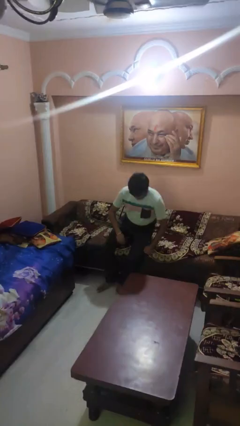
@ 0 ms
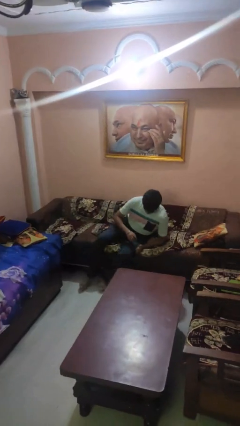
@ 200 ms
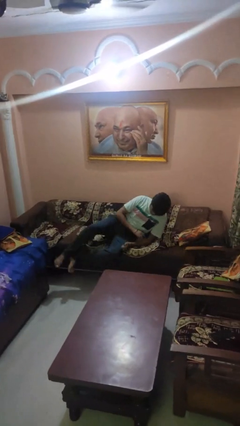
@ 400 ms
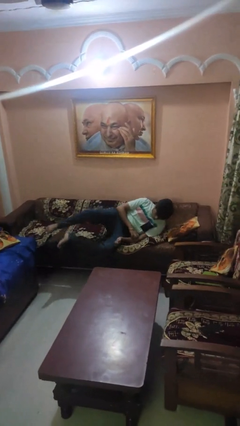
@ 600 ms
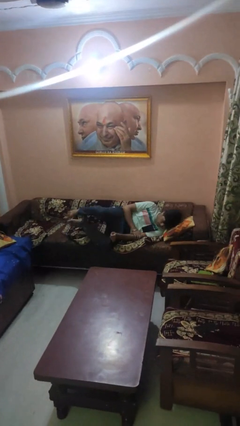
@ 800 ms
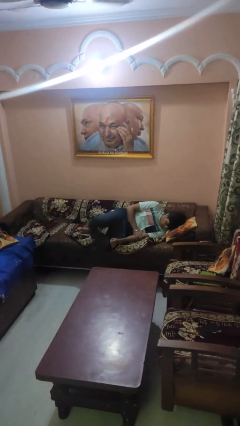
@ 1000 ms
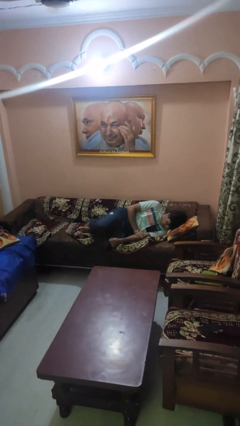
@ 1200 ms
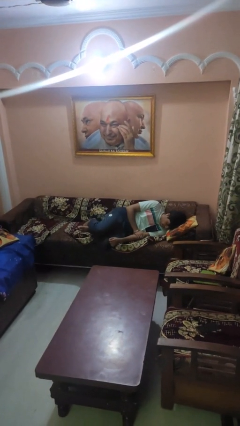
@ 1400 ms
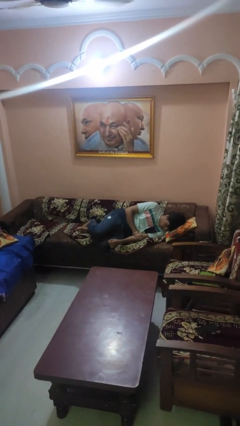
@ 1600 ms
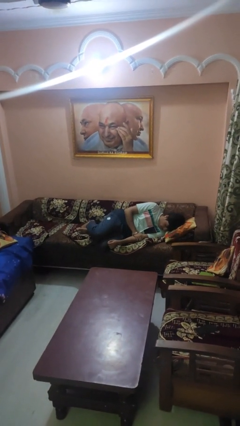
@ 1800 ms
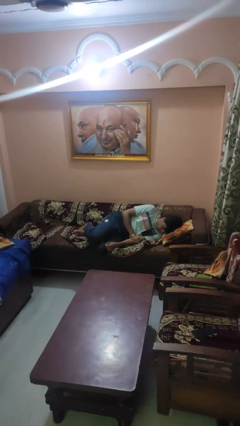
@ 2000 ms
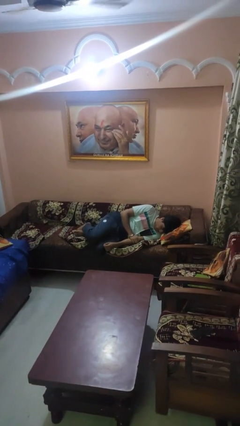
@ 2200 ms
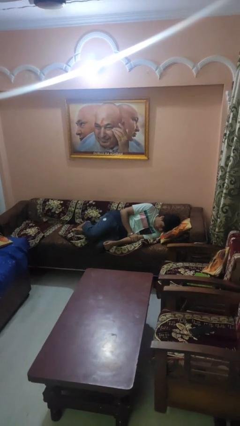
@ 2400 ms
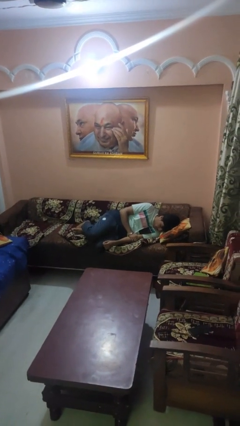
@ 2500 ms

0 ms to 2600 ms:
person lies down on couch

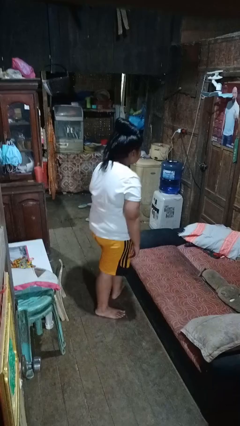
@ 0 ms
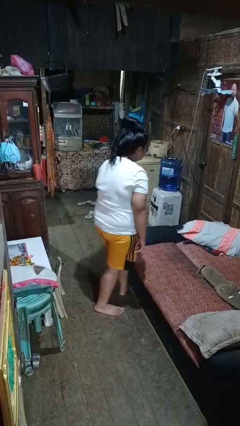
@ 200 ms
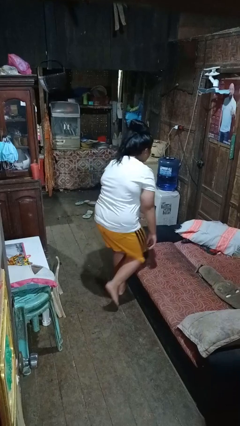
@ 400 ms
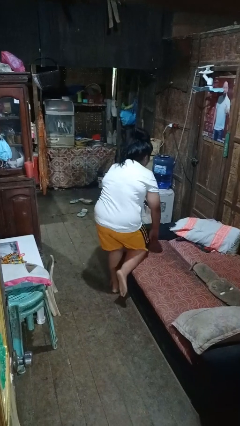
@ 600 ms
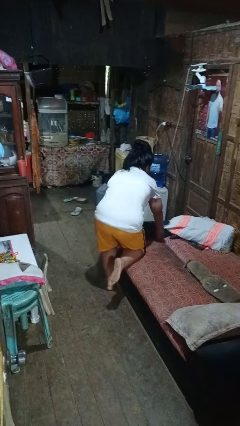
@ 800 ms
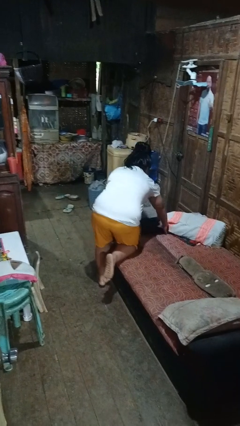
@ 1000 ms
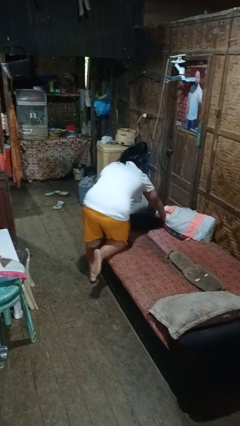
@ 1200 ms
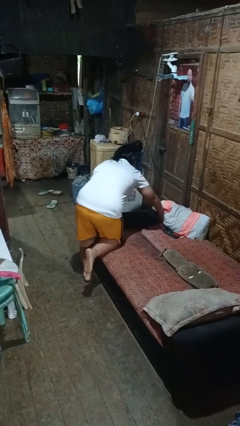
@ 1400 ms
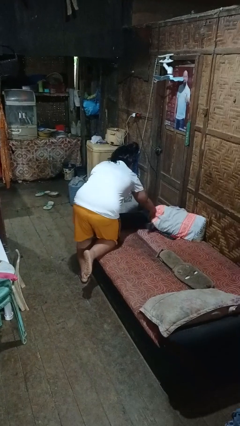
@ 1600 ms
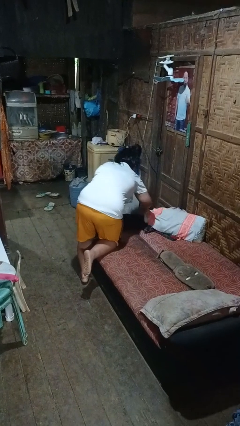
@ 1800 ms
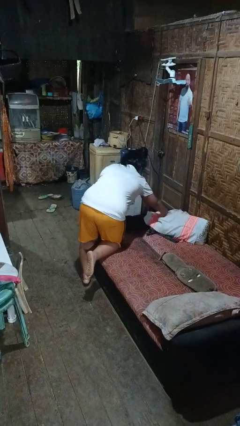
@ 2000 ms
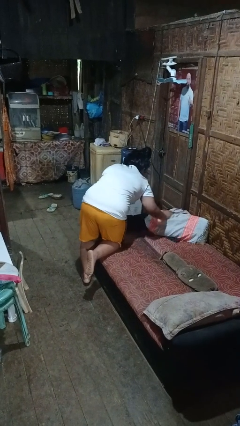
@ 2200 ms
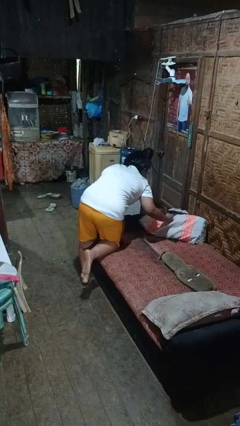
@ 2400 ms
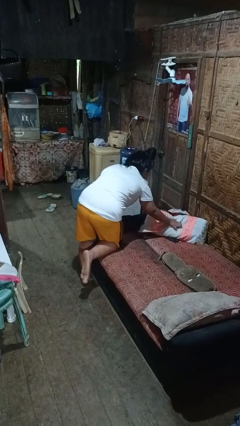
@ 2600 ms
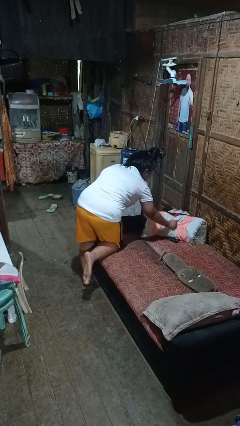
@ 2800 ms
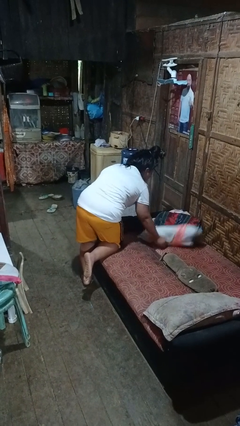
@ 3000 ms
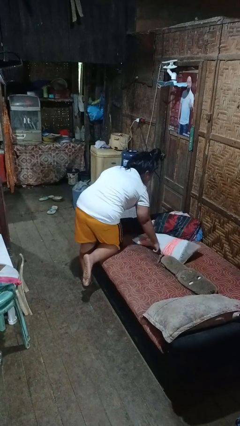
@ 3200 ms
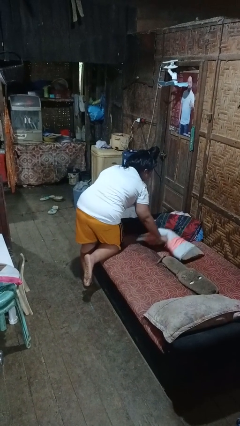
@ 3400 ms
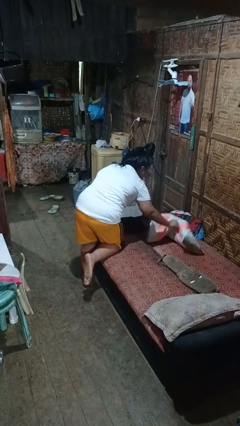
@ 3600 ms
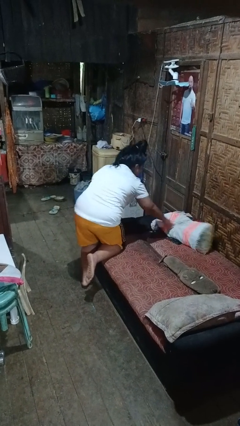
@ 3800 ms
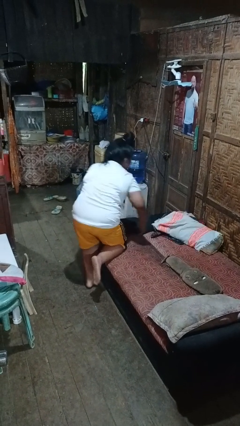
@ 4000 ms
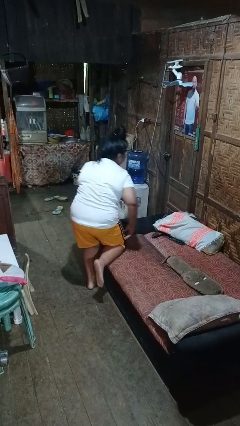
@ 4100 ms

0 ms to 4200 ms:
person searches in couch

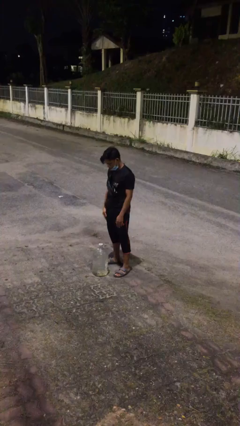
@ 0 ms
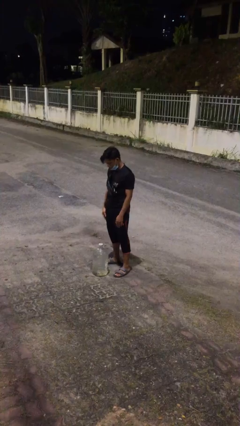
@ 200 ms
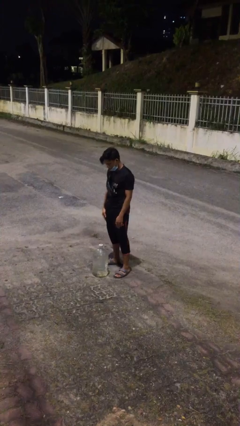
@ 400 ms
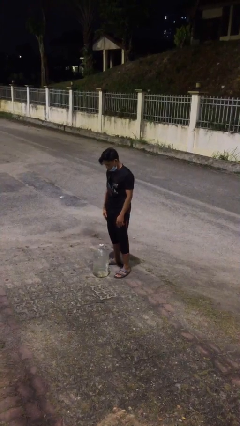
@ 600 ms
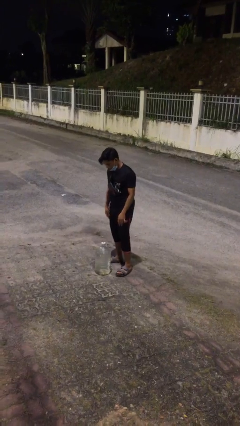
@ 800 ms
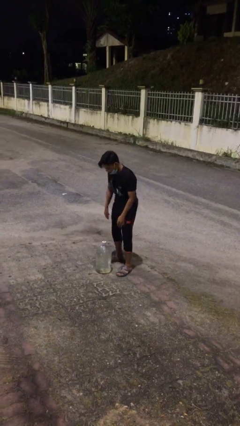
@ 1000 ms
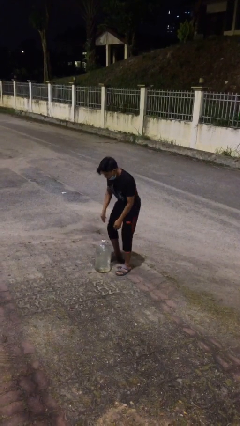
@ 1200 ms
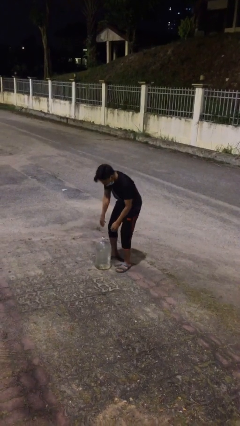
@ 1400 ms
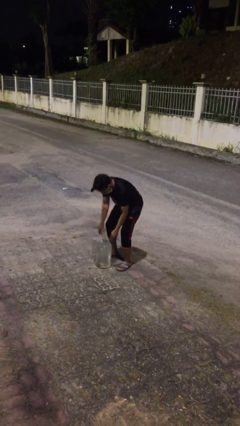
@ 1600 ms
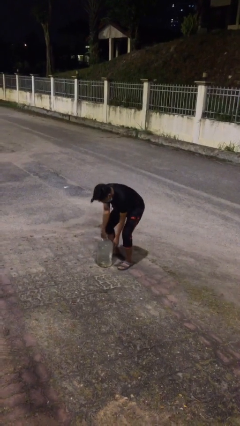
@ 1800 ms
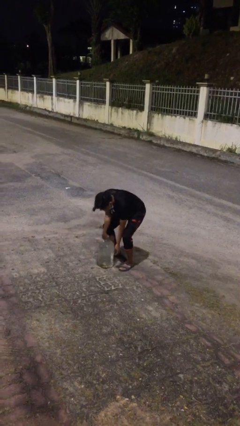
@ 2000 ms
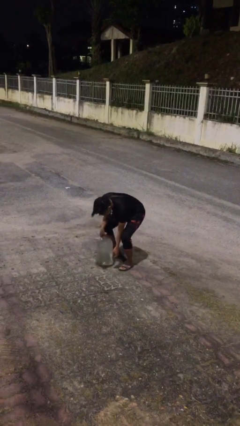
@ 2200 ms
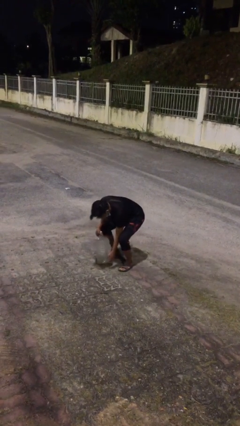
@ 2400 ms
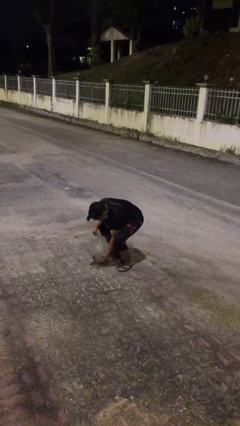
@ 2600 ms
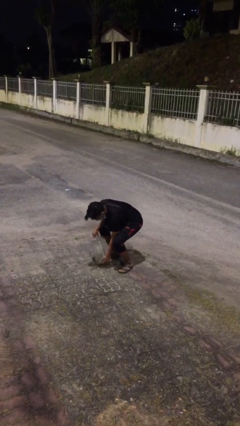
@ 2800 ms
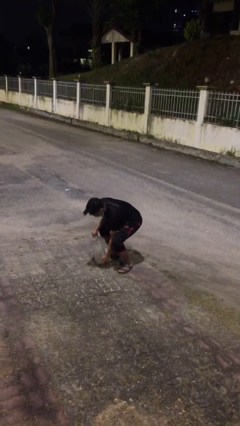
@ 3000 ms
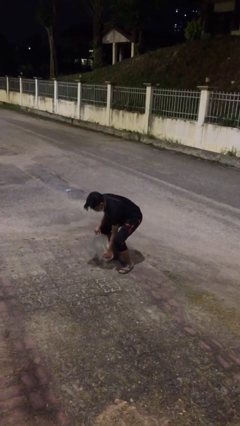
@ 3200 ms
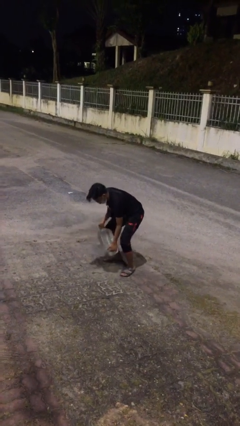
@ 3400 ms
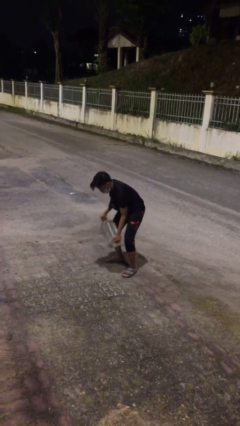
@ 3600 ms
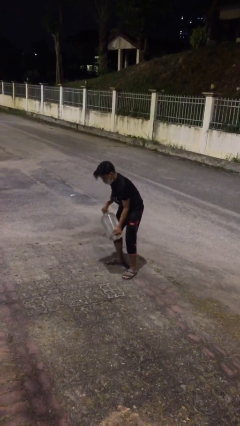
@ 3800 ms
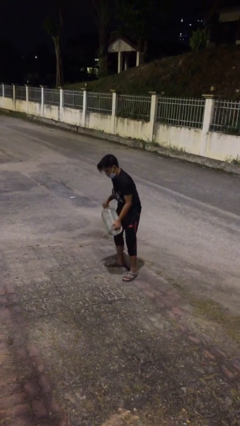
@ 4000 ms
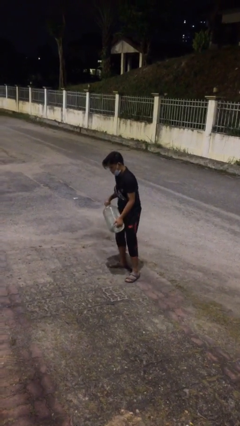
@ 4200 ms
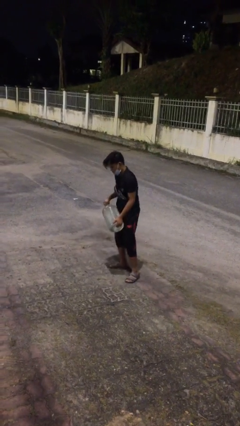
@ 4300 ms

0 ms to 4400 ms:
person picks up object from floor

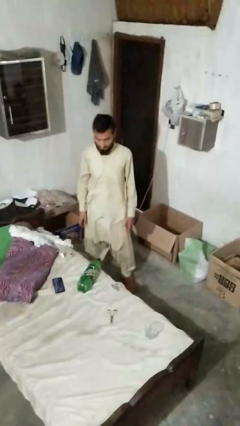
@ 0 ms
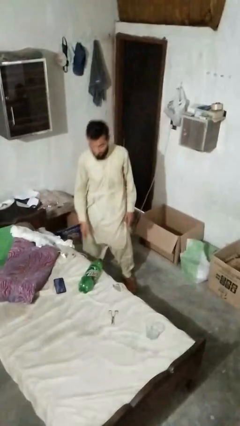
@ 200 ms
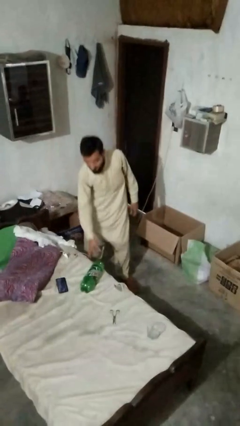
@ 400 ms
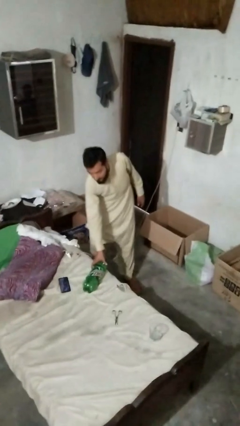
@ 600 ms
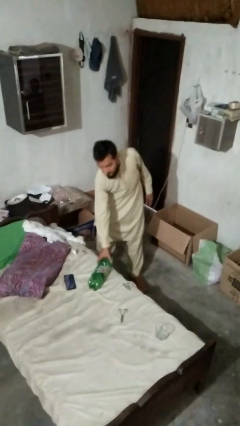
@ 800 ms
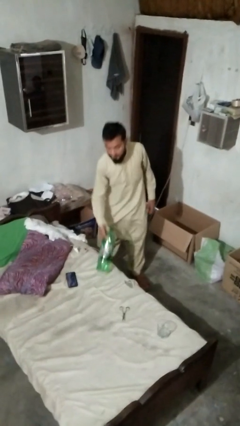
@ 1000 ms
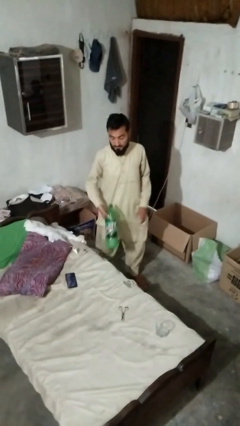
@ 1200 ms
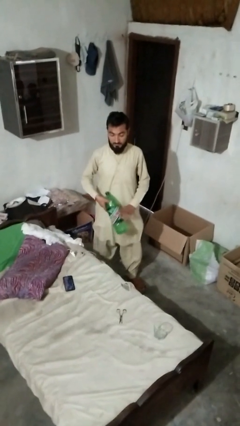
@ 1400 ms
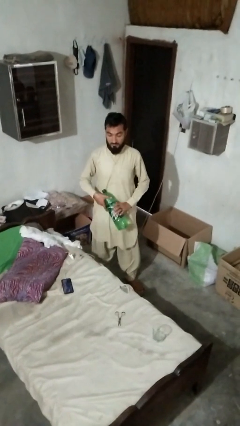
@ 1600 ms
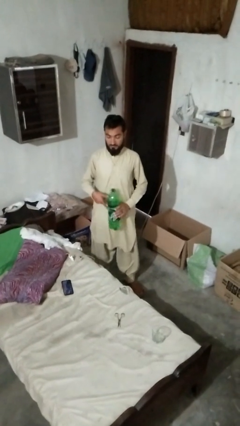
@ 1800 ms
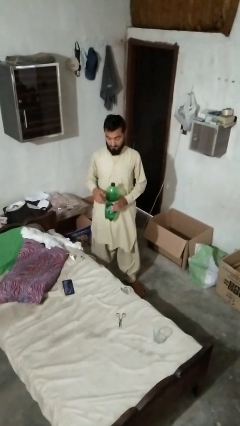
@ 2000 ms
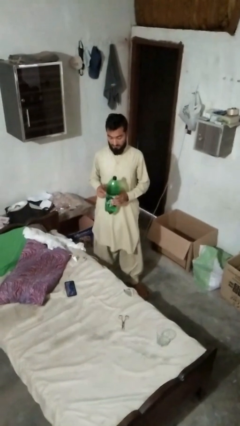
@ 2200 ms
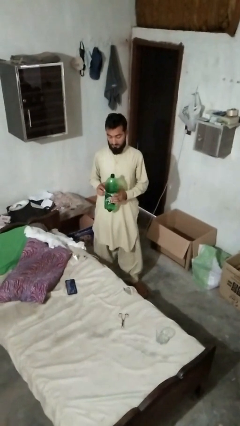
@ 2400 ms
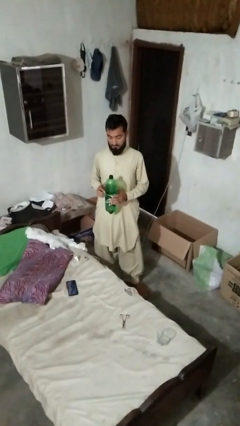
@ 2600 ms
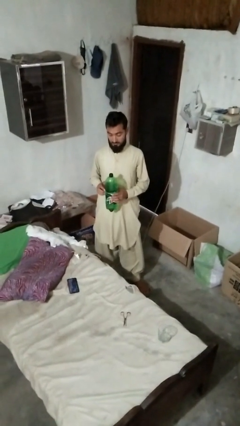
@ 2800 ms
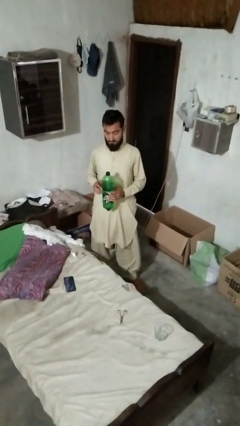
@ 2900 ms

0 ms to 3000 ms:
person picks up object from bed

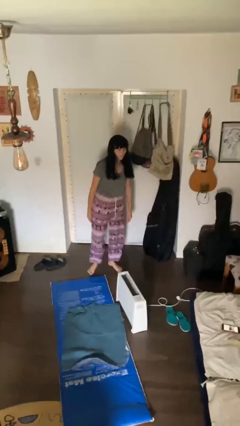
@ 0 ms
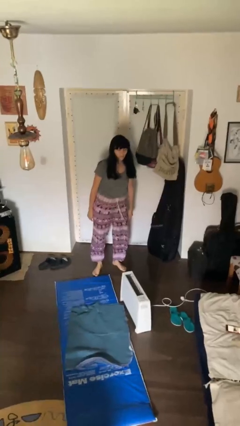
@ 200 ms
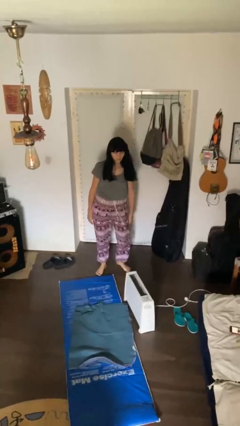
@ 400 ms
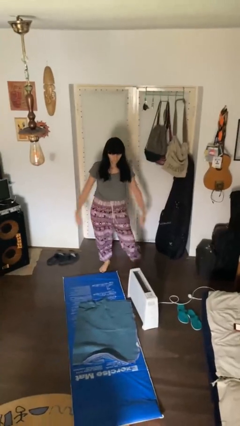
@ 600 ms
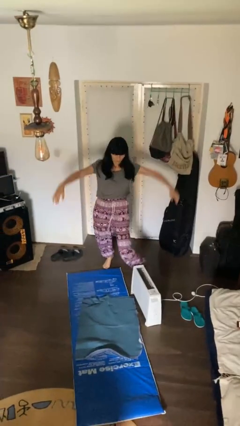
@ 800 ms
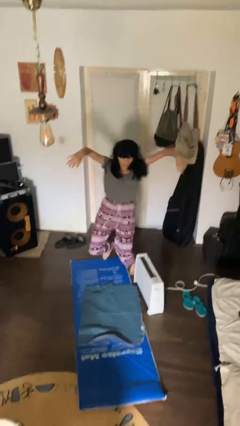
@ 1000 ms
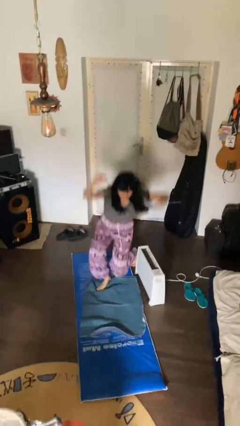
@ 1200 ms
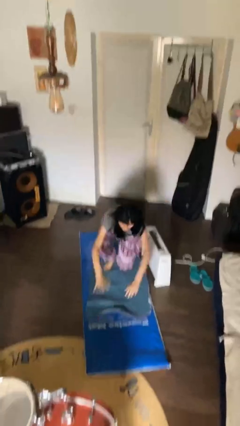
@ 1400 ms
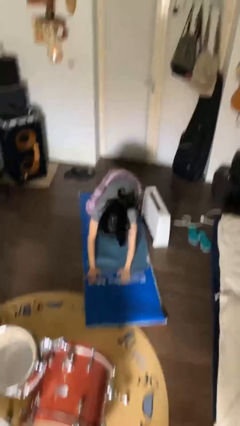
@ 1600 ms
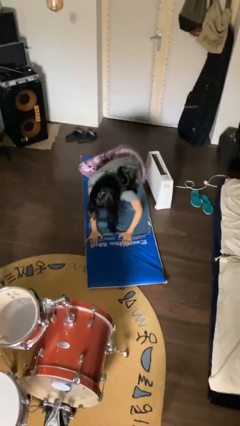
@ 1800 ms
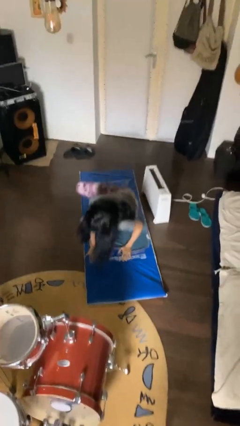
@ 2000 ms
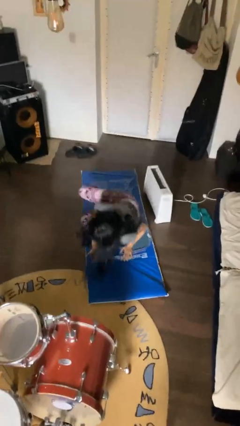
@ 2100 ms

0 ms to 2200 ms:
person trips on object on floor

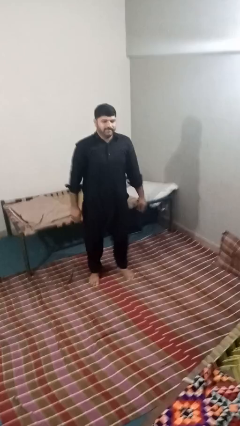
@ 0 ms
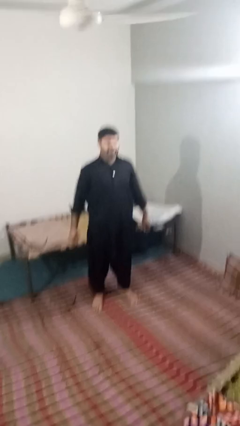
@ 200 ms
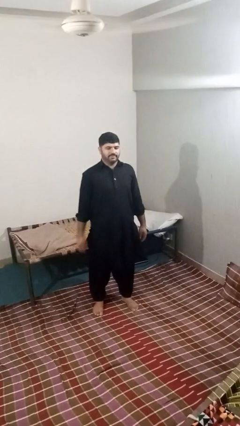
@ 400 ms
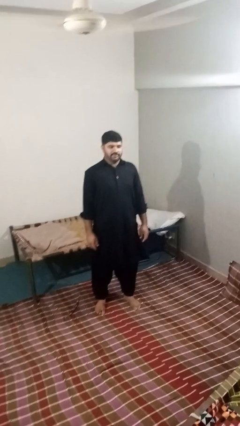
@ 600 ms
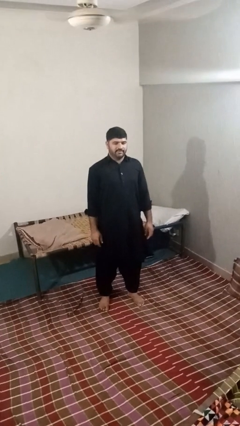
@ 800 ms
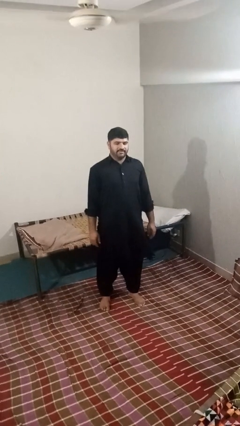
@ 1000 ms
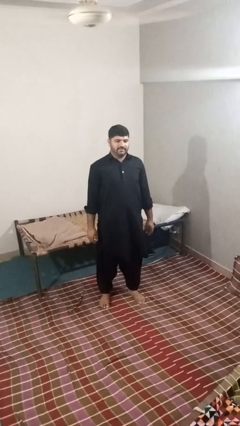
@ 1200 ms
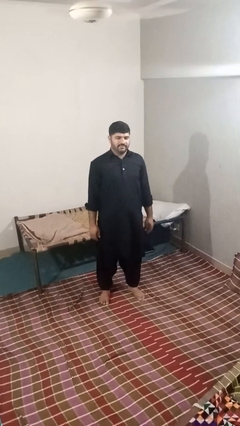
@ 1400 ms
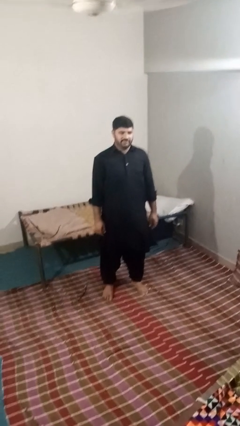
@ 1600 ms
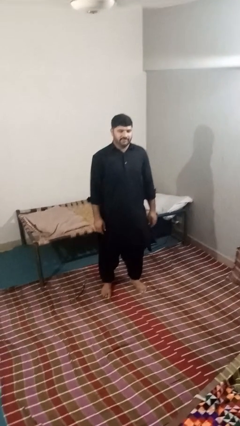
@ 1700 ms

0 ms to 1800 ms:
person stands up
